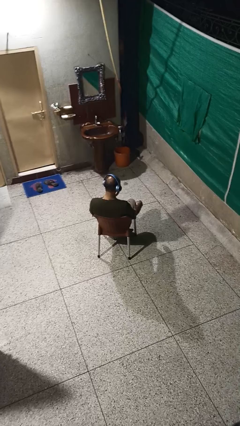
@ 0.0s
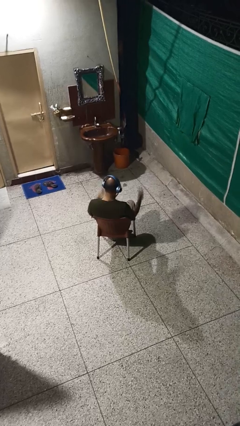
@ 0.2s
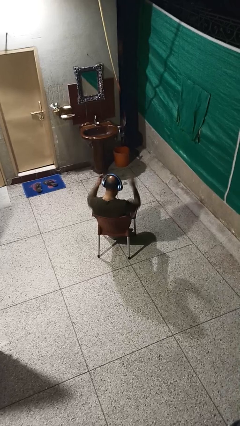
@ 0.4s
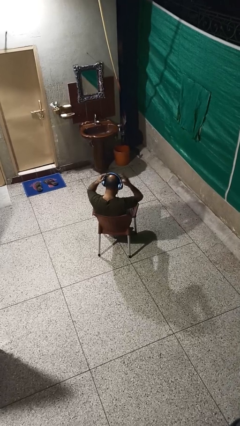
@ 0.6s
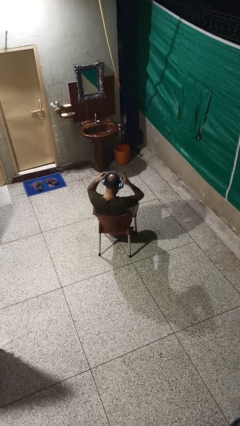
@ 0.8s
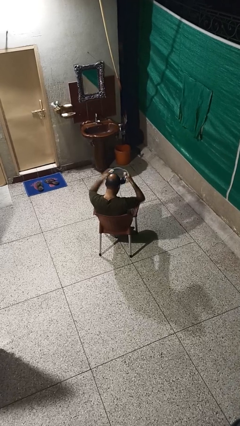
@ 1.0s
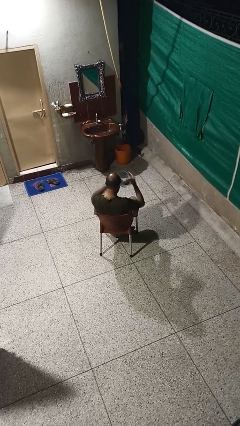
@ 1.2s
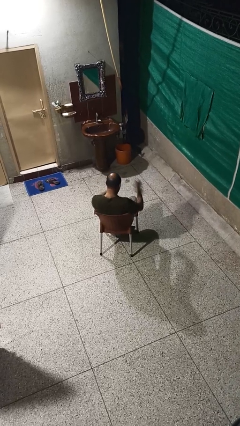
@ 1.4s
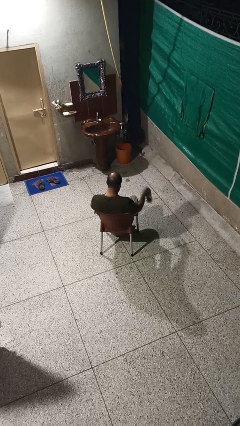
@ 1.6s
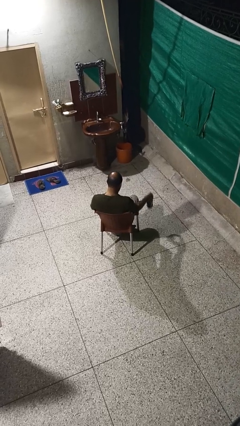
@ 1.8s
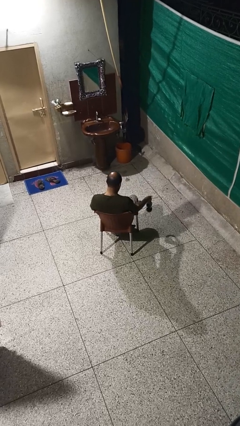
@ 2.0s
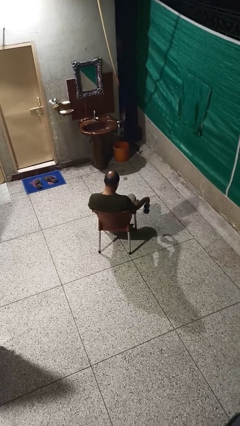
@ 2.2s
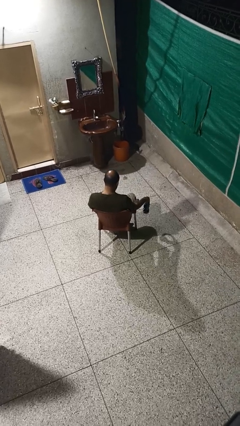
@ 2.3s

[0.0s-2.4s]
person takes off headphones

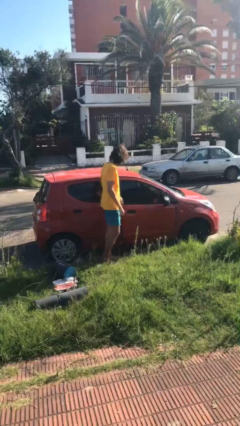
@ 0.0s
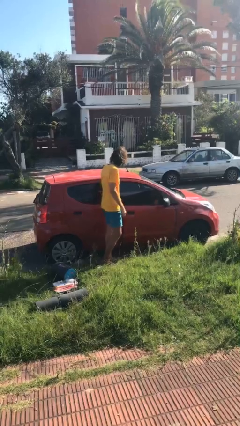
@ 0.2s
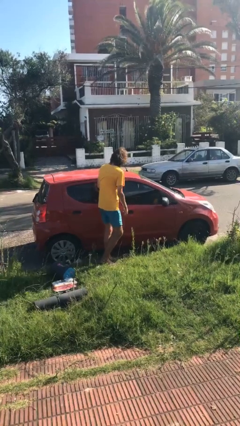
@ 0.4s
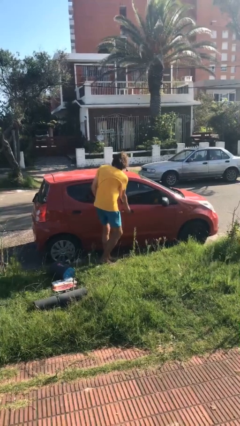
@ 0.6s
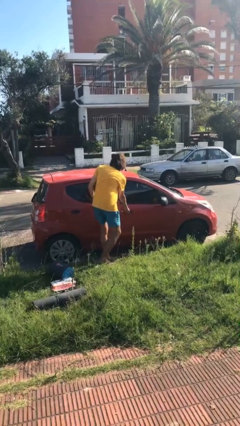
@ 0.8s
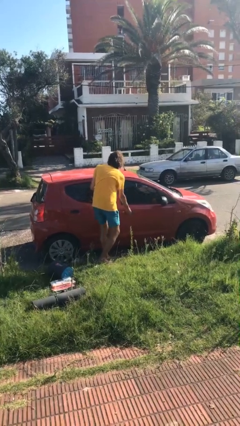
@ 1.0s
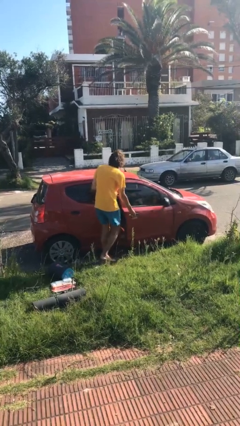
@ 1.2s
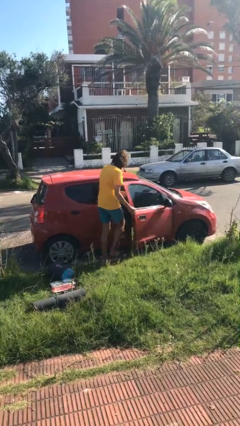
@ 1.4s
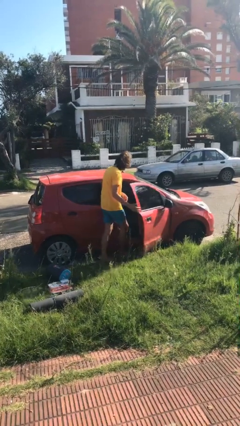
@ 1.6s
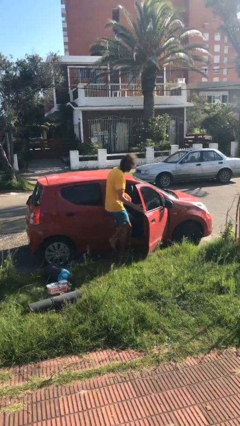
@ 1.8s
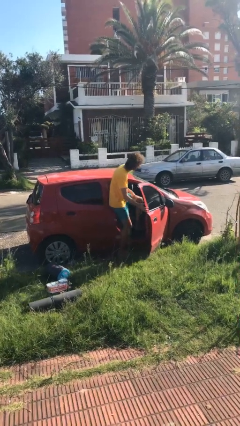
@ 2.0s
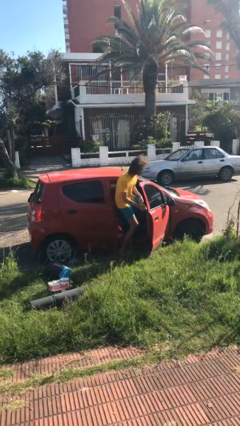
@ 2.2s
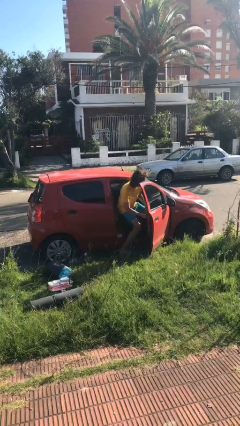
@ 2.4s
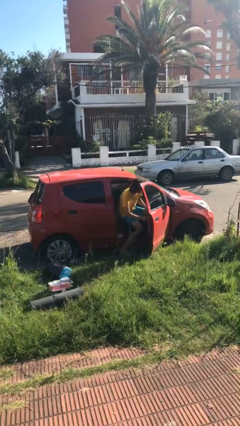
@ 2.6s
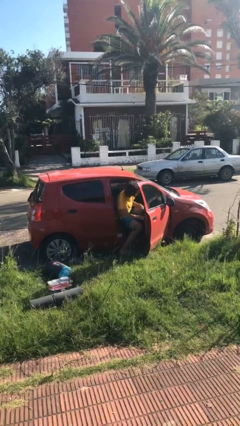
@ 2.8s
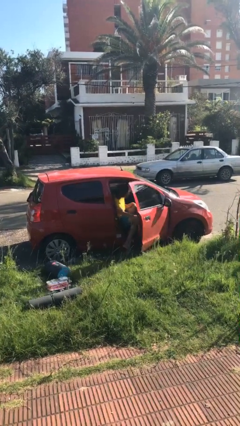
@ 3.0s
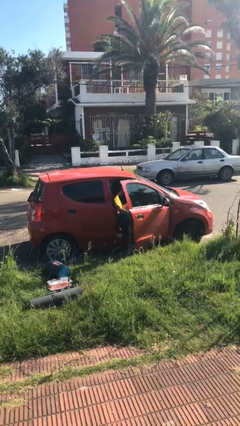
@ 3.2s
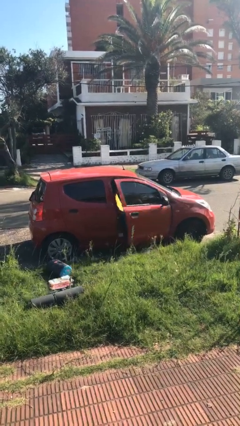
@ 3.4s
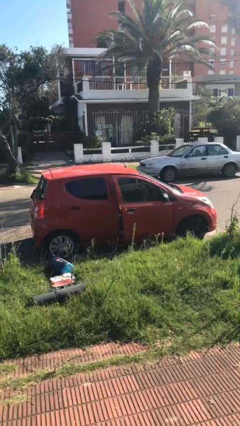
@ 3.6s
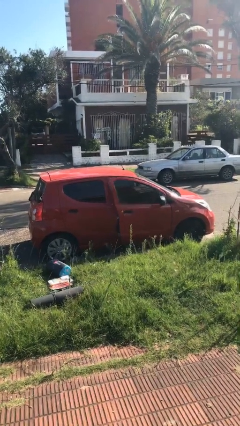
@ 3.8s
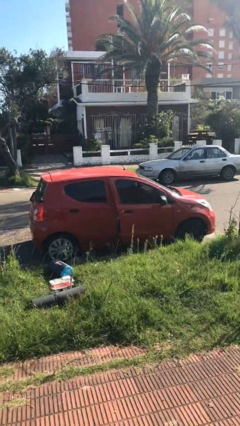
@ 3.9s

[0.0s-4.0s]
car picks up person

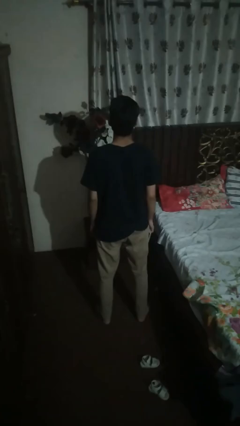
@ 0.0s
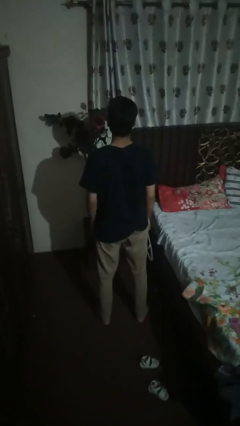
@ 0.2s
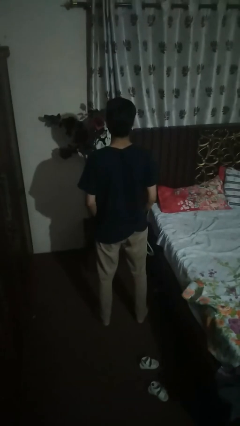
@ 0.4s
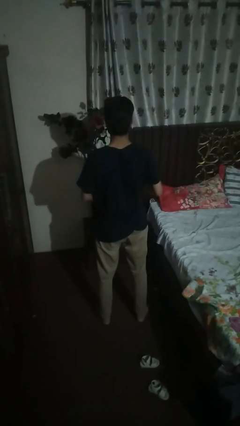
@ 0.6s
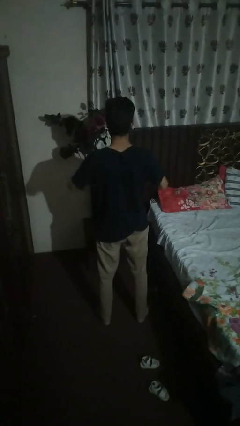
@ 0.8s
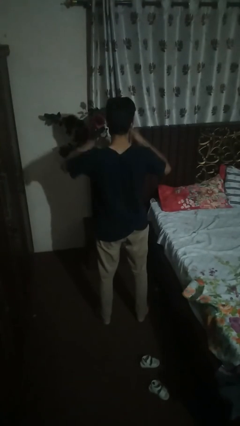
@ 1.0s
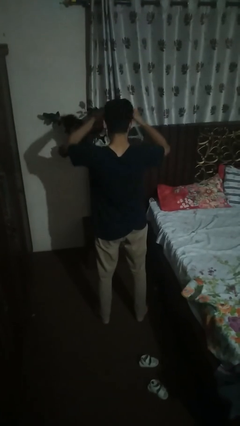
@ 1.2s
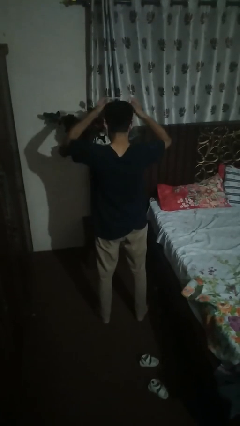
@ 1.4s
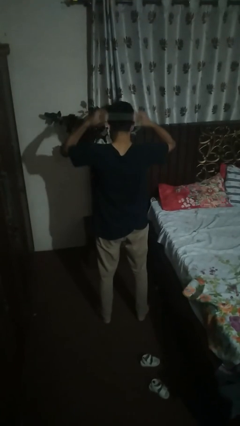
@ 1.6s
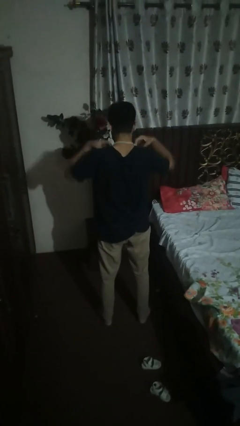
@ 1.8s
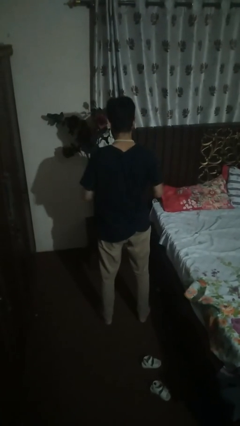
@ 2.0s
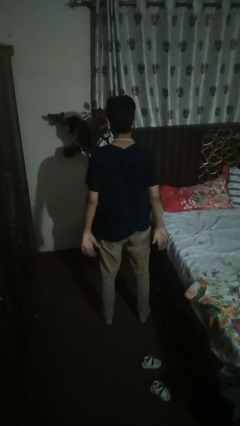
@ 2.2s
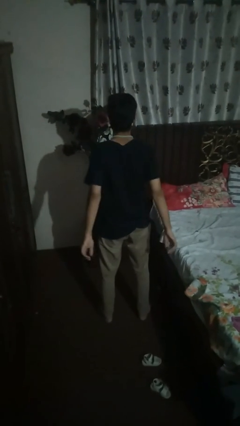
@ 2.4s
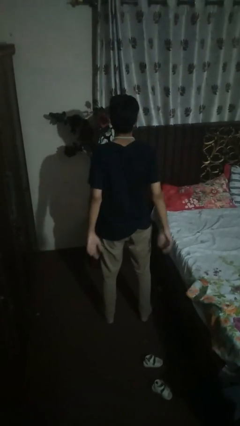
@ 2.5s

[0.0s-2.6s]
person puts on necklace

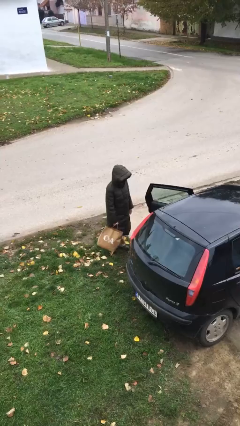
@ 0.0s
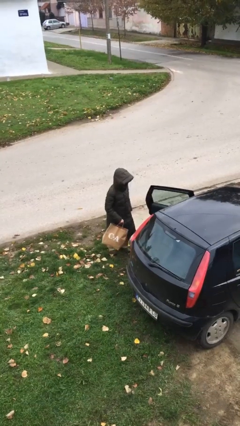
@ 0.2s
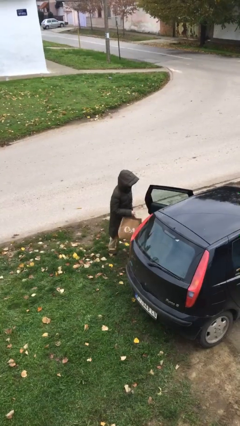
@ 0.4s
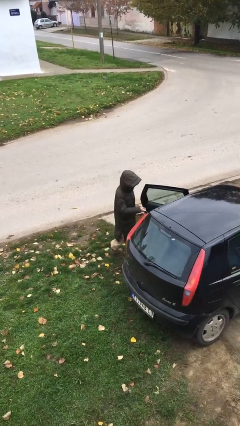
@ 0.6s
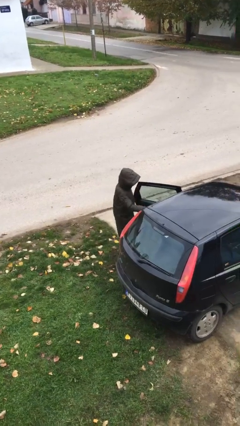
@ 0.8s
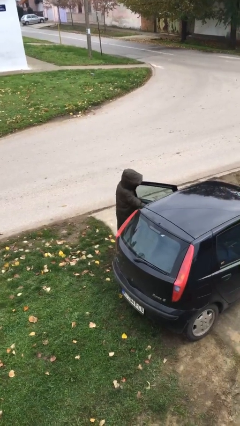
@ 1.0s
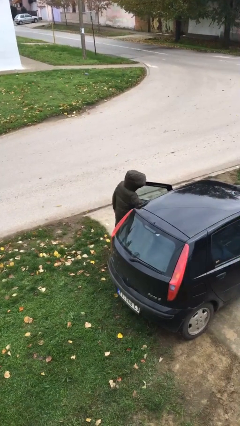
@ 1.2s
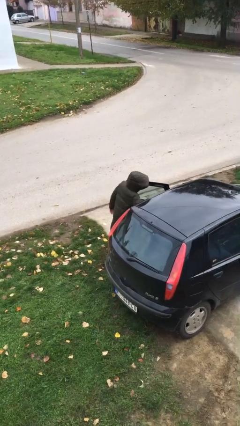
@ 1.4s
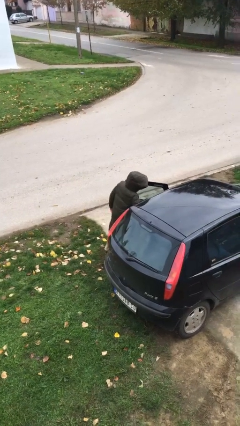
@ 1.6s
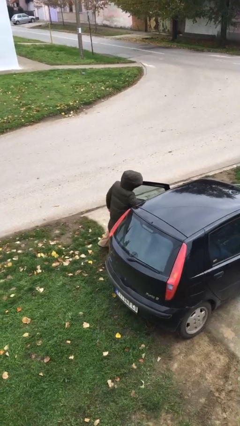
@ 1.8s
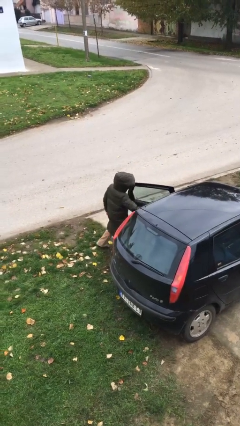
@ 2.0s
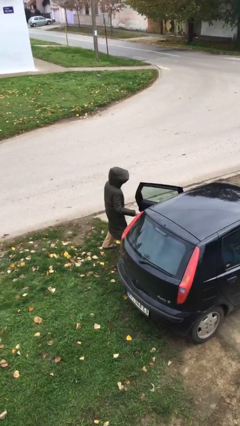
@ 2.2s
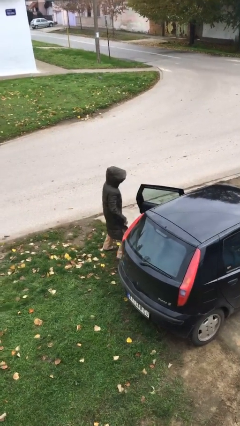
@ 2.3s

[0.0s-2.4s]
person loads car

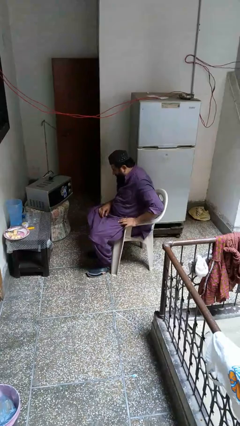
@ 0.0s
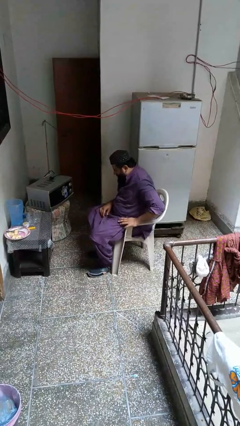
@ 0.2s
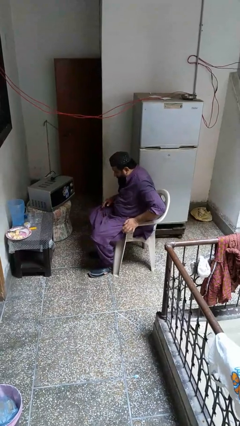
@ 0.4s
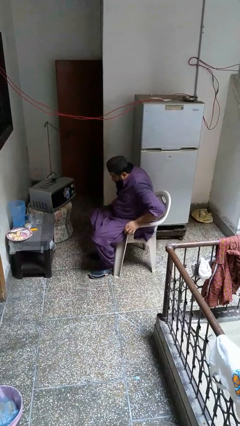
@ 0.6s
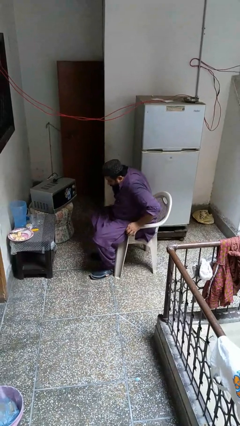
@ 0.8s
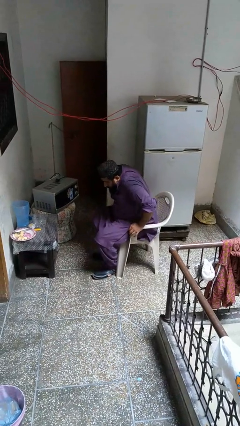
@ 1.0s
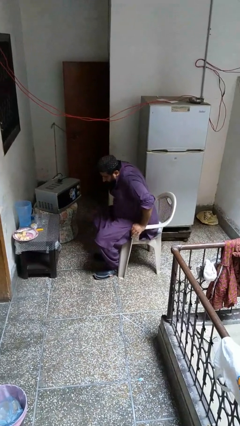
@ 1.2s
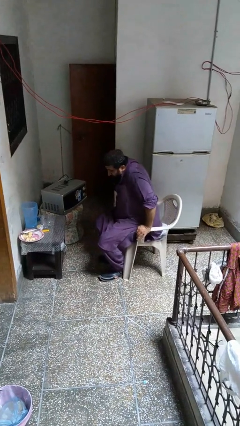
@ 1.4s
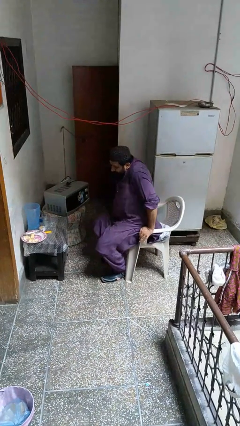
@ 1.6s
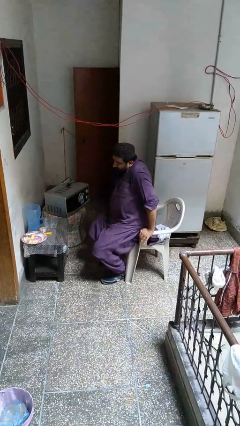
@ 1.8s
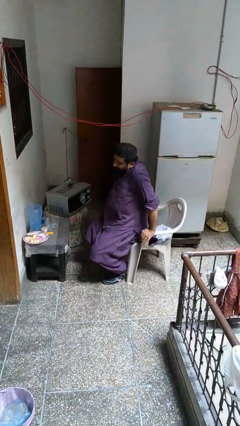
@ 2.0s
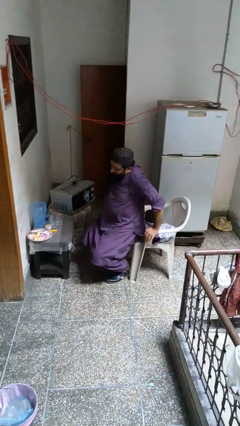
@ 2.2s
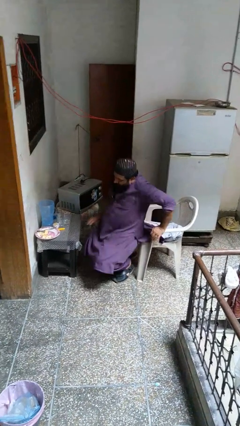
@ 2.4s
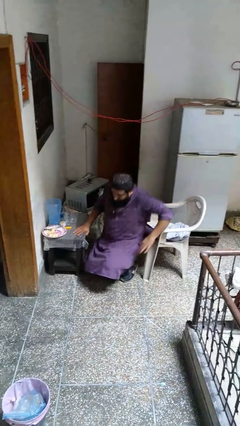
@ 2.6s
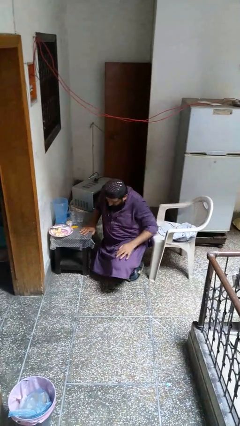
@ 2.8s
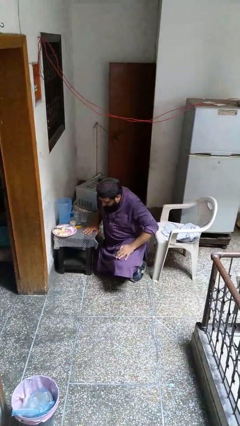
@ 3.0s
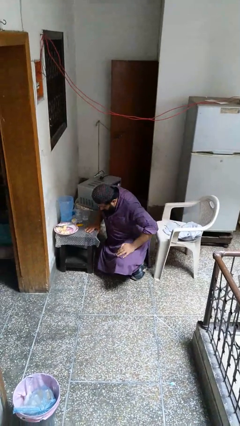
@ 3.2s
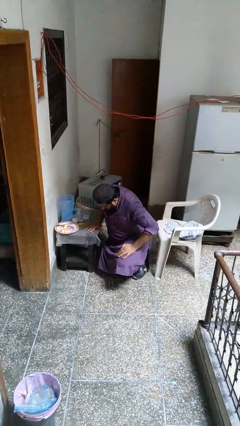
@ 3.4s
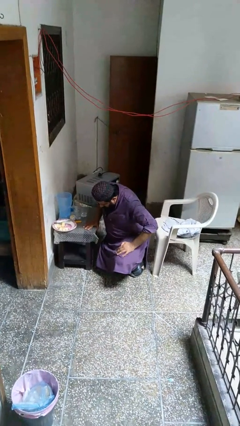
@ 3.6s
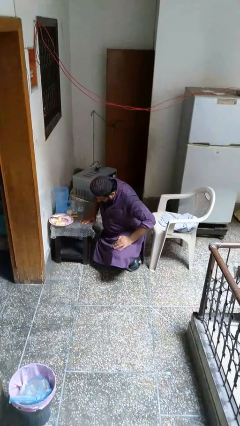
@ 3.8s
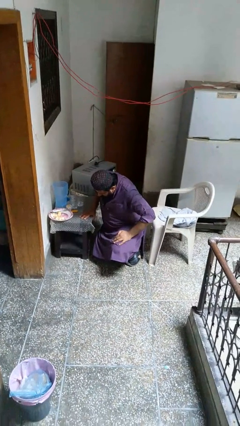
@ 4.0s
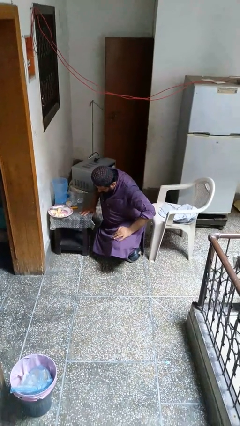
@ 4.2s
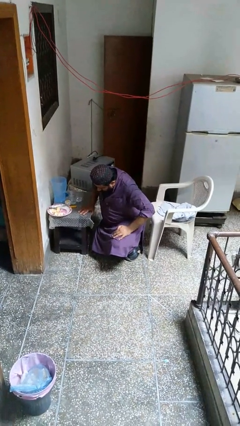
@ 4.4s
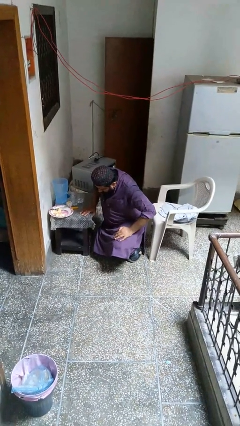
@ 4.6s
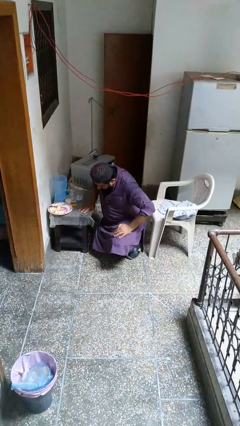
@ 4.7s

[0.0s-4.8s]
person falls from chair

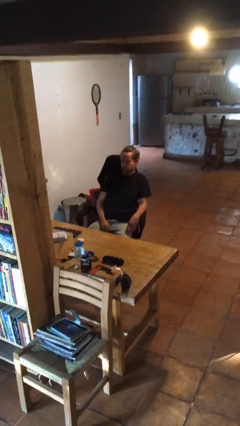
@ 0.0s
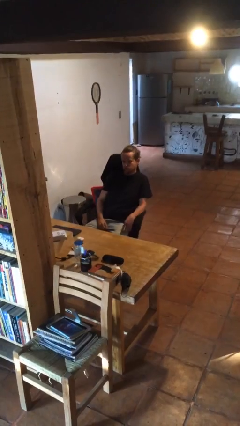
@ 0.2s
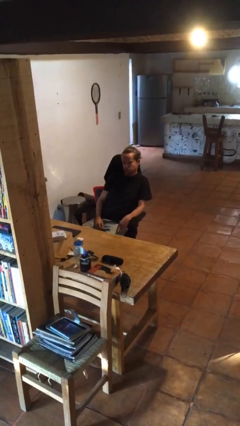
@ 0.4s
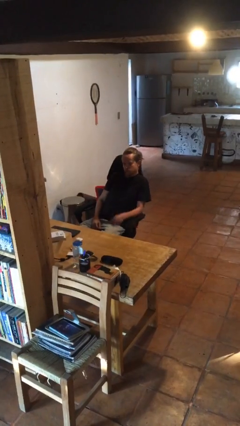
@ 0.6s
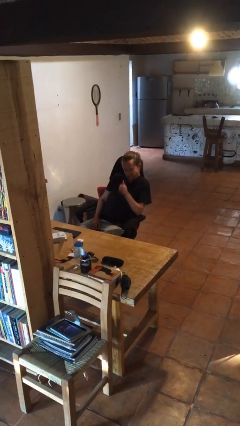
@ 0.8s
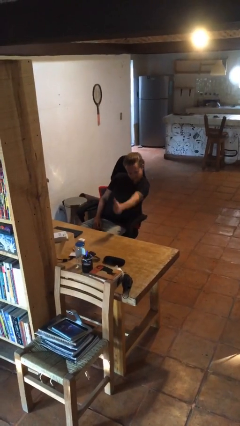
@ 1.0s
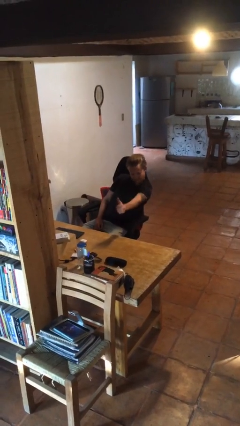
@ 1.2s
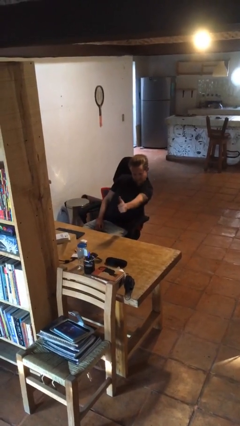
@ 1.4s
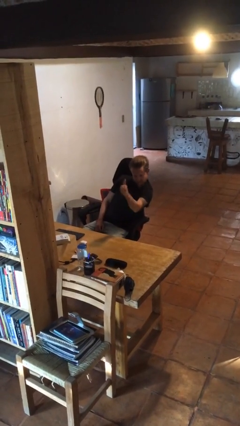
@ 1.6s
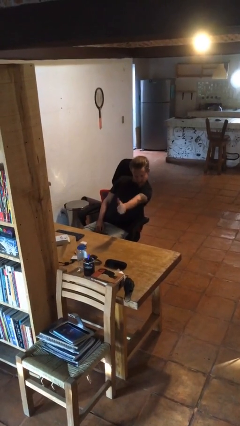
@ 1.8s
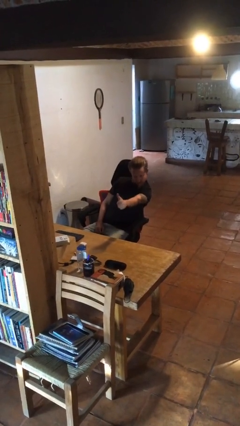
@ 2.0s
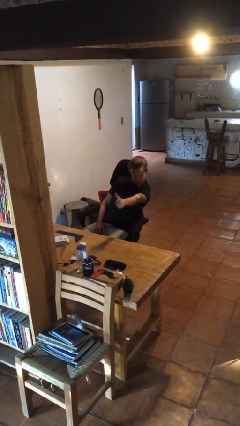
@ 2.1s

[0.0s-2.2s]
person gestures thumbs up
